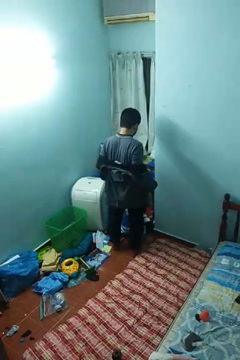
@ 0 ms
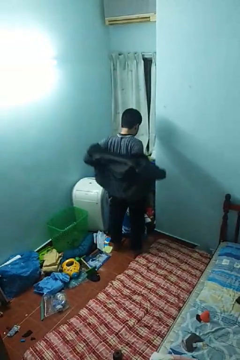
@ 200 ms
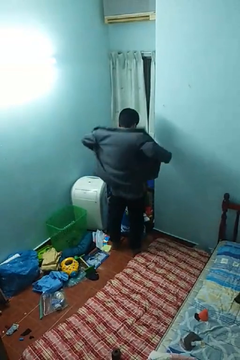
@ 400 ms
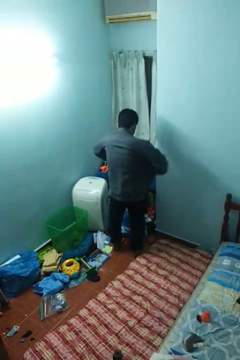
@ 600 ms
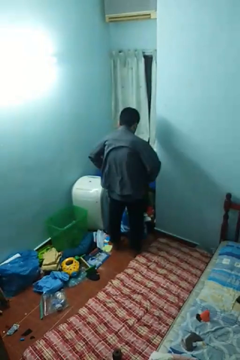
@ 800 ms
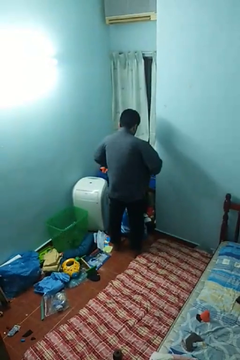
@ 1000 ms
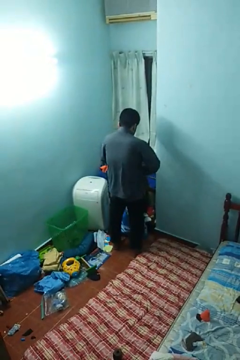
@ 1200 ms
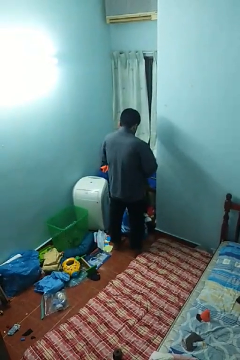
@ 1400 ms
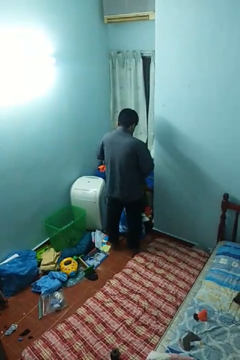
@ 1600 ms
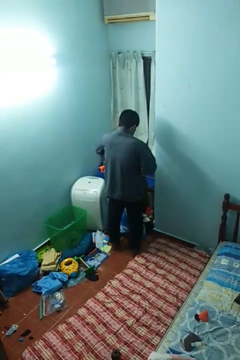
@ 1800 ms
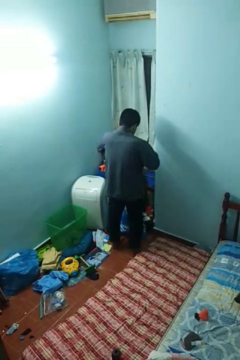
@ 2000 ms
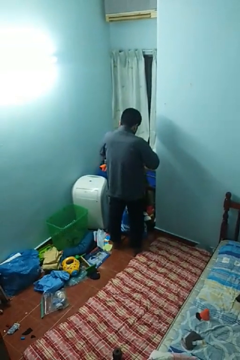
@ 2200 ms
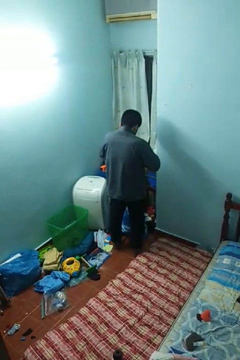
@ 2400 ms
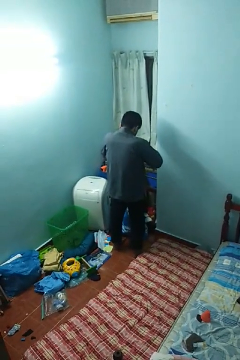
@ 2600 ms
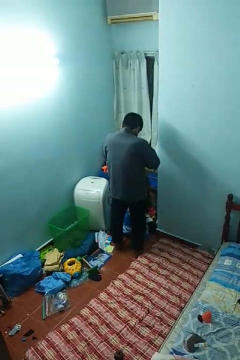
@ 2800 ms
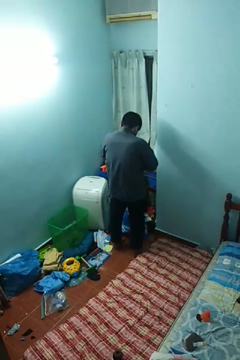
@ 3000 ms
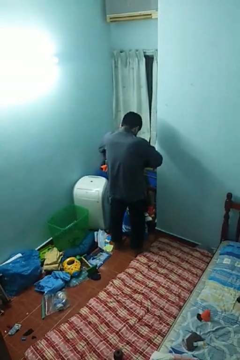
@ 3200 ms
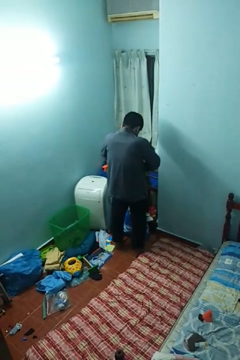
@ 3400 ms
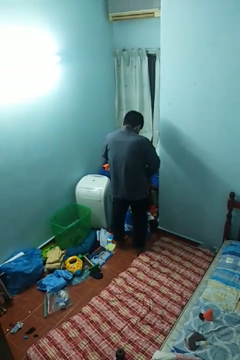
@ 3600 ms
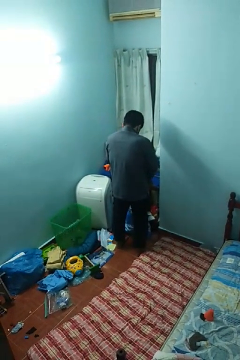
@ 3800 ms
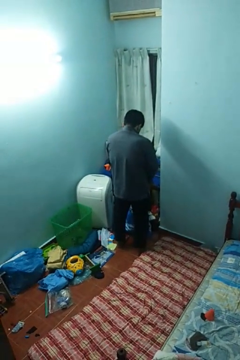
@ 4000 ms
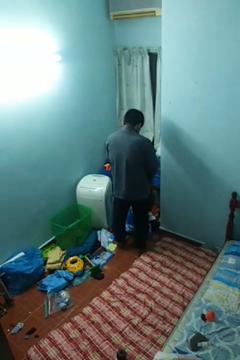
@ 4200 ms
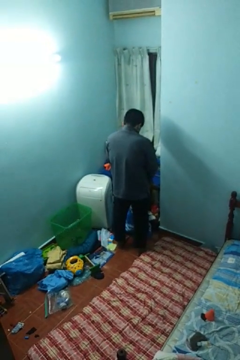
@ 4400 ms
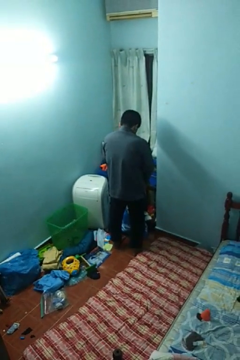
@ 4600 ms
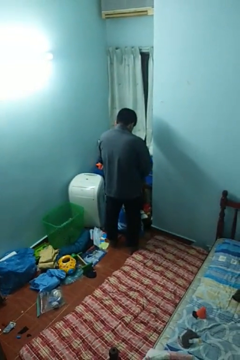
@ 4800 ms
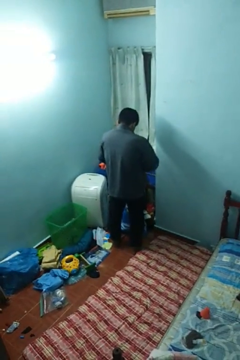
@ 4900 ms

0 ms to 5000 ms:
person buttons shirt

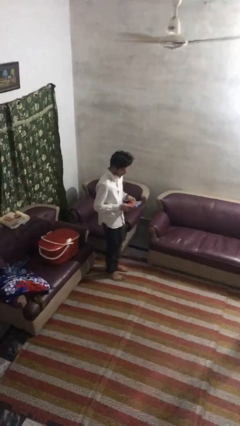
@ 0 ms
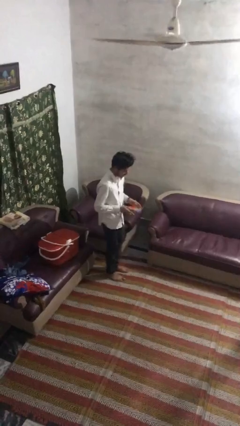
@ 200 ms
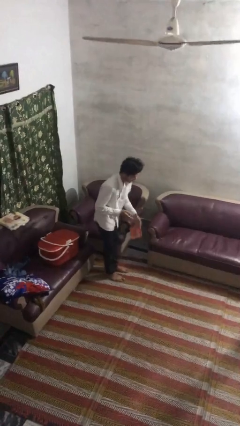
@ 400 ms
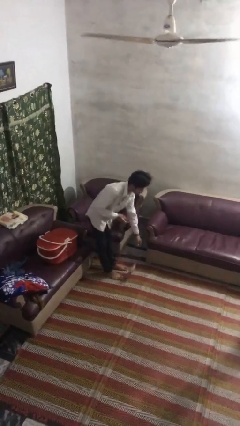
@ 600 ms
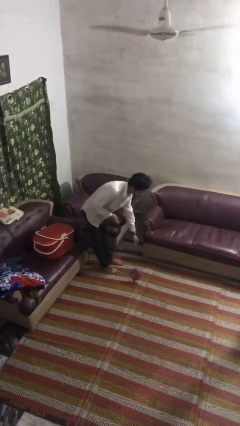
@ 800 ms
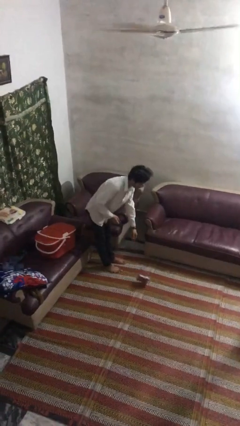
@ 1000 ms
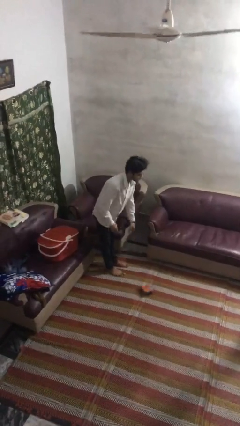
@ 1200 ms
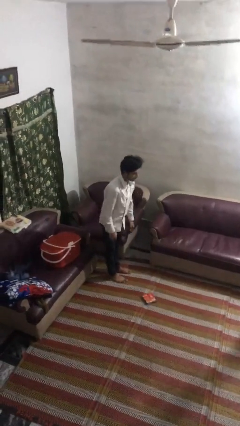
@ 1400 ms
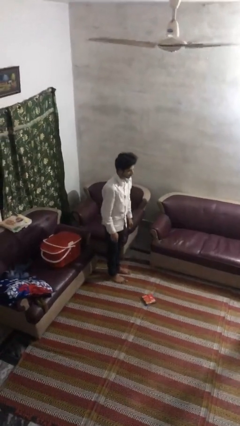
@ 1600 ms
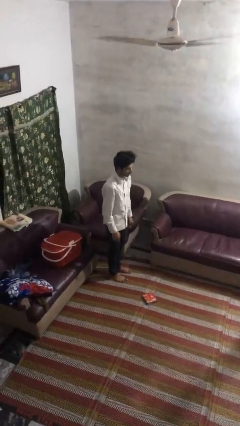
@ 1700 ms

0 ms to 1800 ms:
person drops object

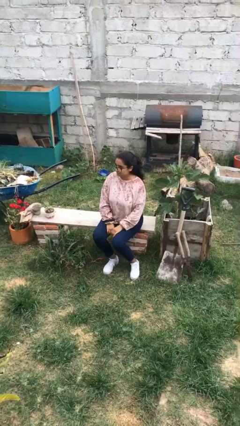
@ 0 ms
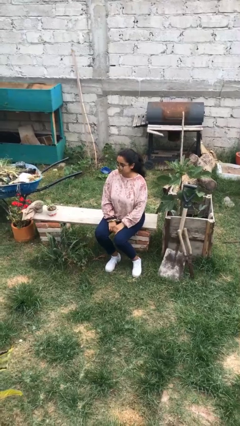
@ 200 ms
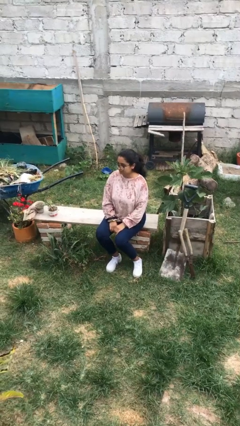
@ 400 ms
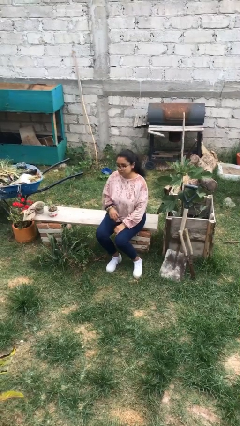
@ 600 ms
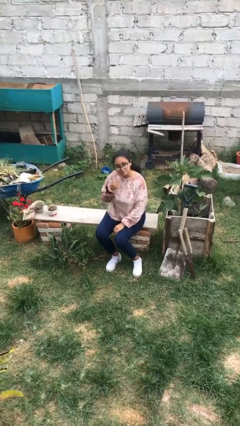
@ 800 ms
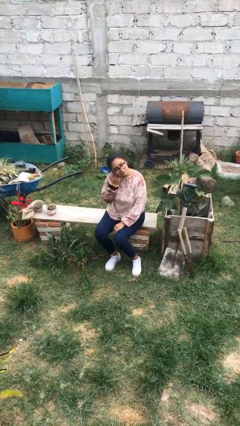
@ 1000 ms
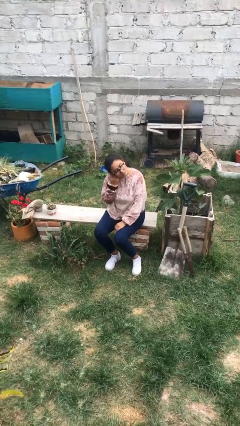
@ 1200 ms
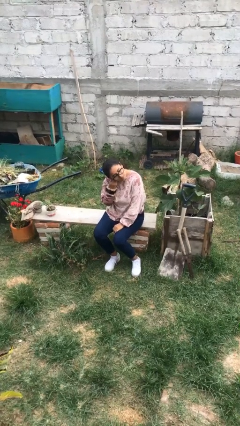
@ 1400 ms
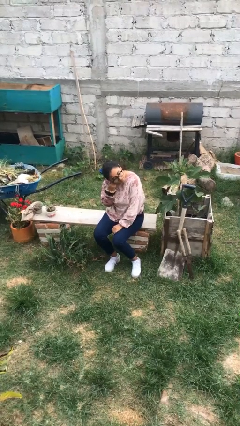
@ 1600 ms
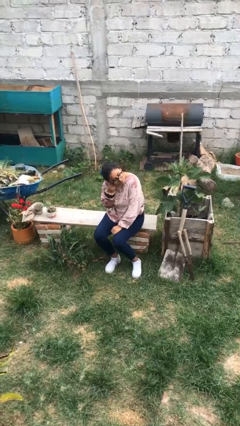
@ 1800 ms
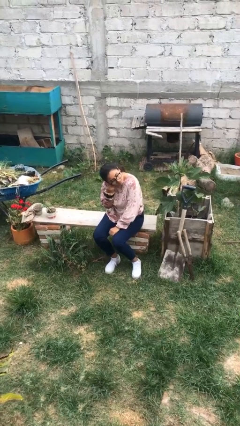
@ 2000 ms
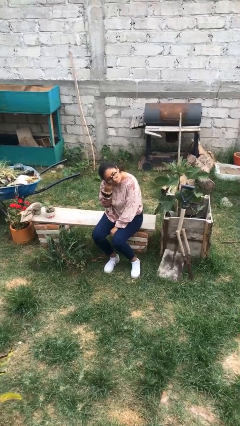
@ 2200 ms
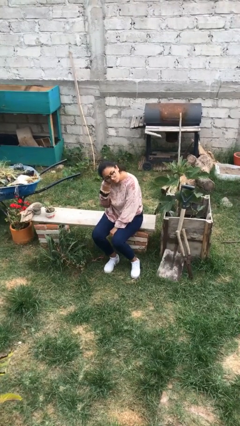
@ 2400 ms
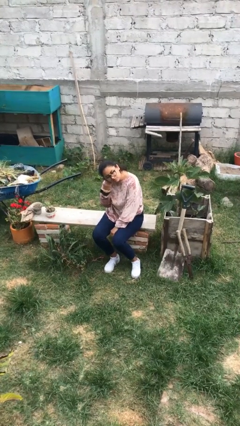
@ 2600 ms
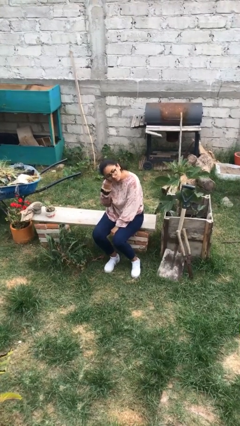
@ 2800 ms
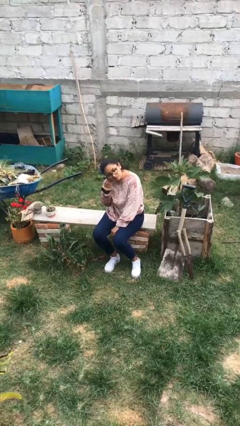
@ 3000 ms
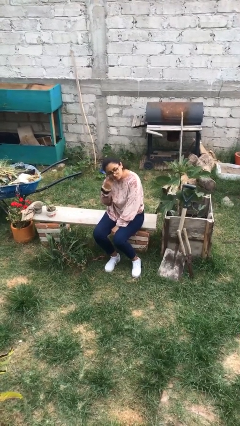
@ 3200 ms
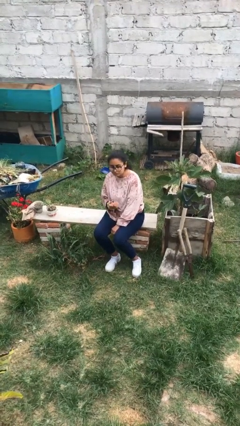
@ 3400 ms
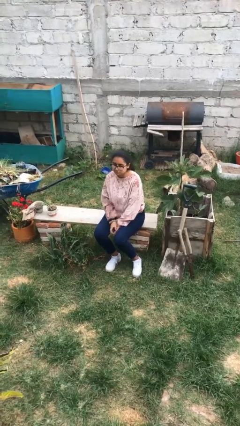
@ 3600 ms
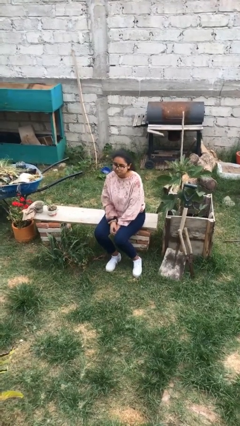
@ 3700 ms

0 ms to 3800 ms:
person touches earlobe

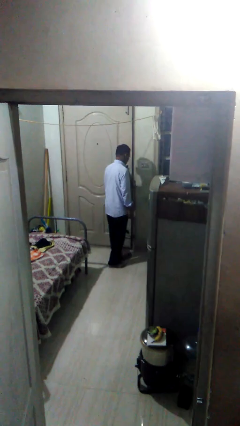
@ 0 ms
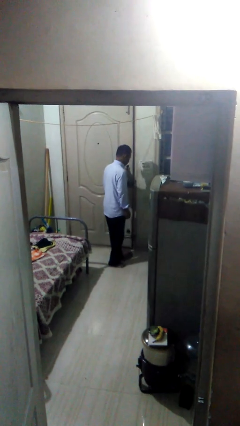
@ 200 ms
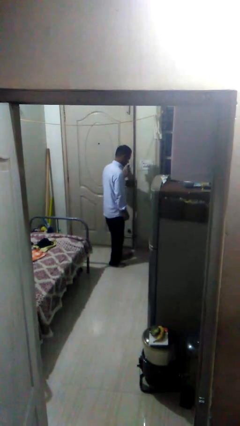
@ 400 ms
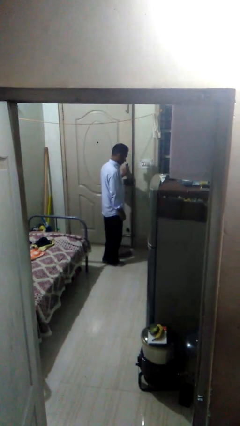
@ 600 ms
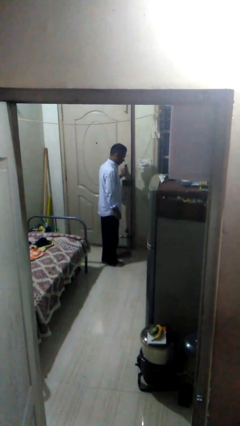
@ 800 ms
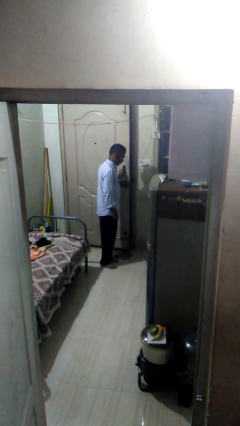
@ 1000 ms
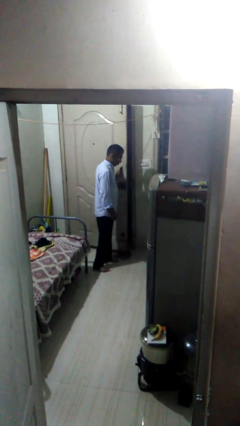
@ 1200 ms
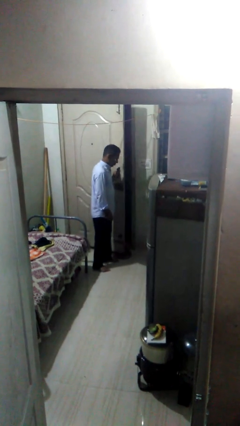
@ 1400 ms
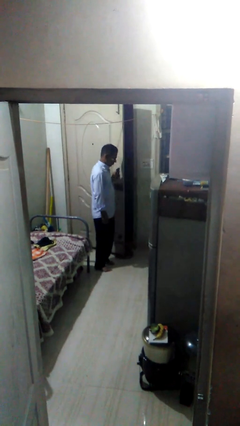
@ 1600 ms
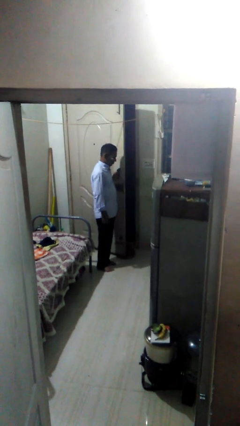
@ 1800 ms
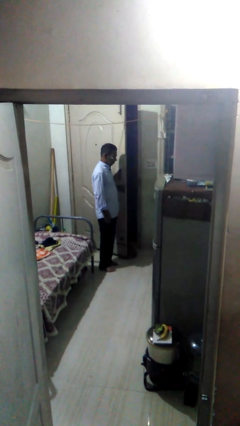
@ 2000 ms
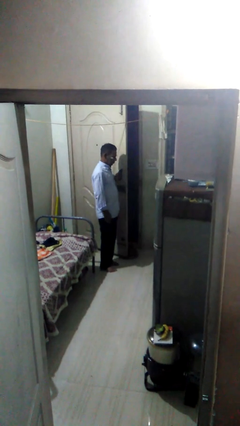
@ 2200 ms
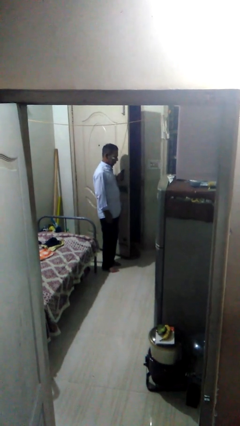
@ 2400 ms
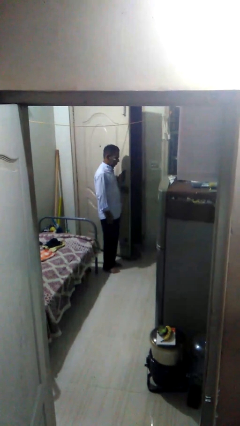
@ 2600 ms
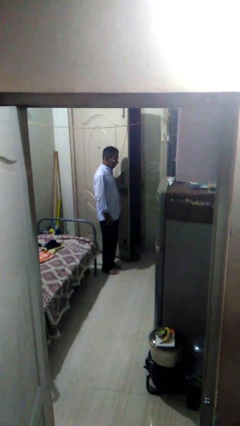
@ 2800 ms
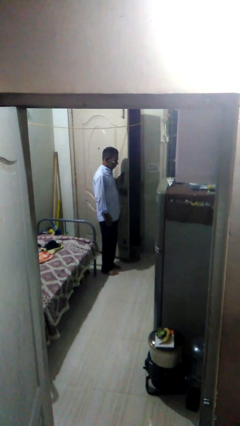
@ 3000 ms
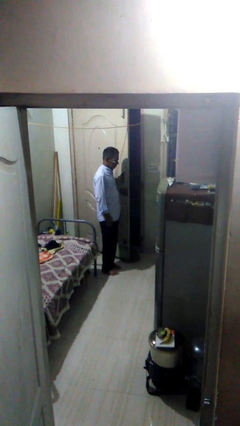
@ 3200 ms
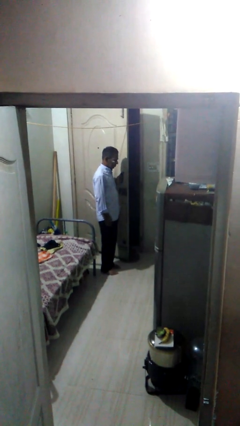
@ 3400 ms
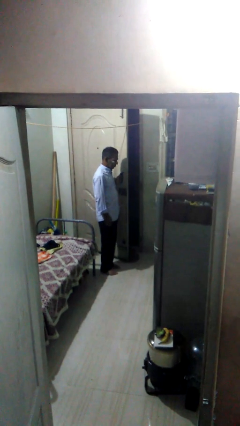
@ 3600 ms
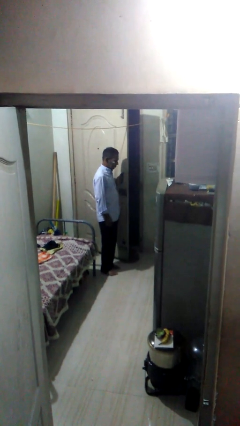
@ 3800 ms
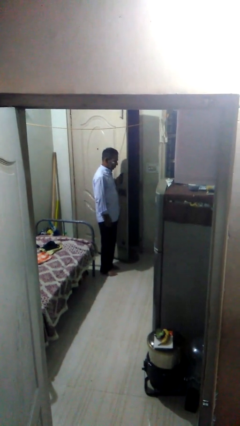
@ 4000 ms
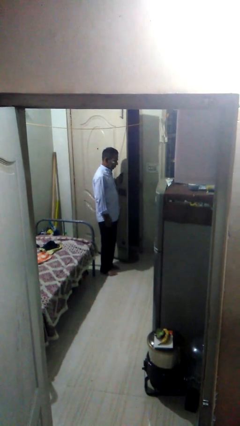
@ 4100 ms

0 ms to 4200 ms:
person opens facility door

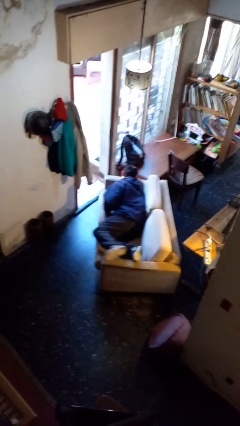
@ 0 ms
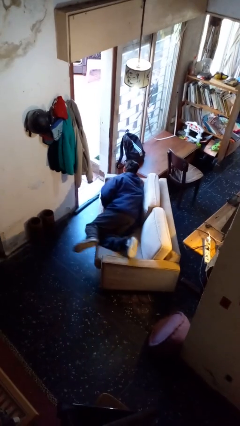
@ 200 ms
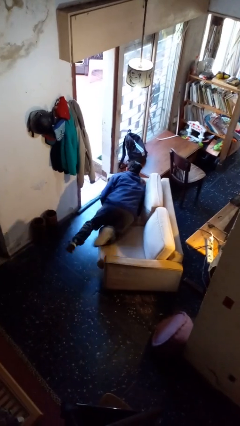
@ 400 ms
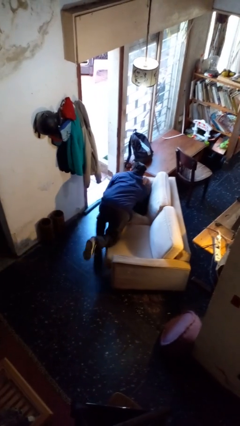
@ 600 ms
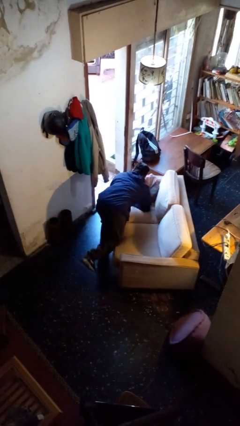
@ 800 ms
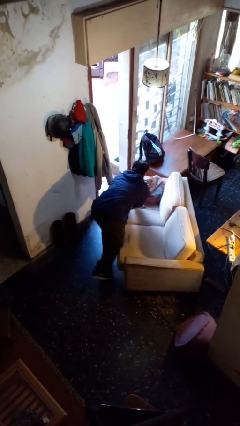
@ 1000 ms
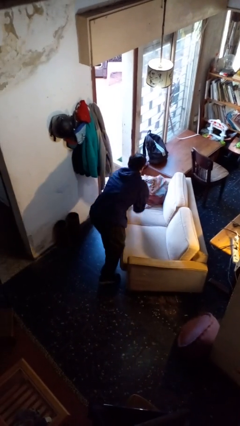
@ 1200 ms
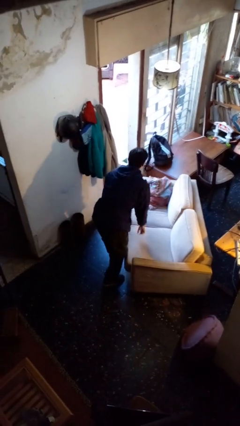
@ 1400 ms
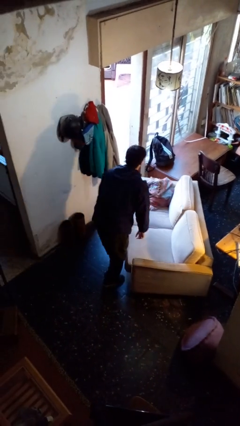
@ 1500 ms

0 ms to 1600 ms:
person stands up

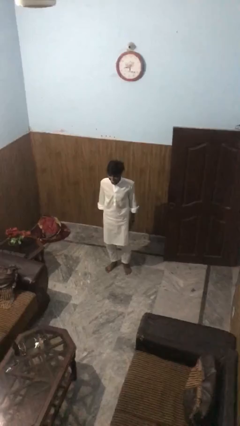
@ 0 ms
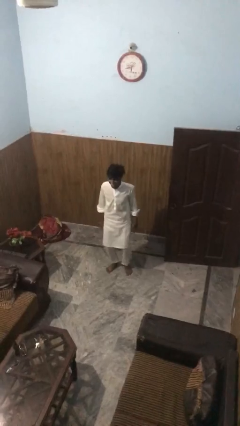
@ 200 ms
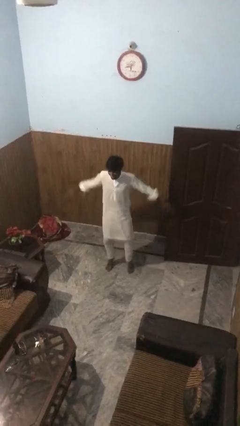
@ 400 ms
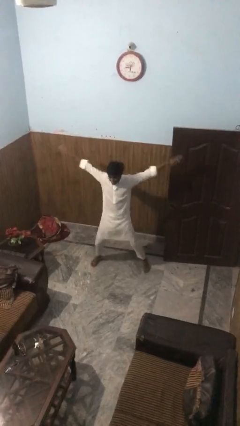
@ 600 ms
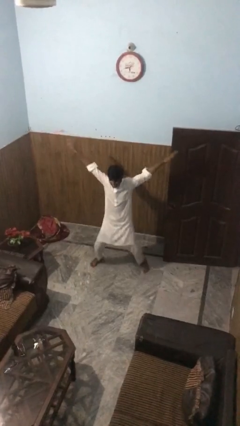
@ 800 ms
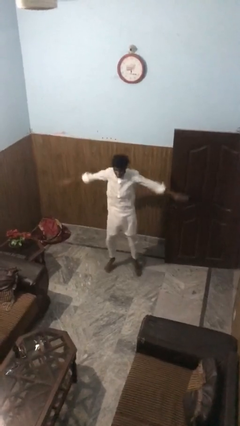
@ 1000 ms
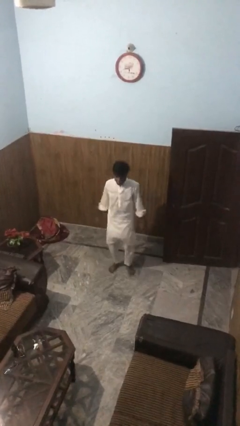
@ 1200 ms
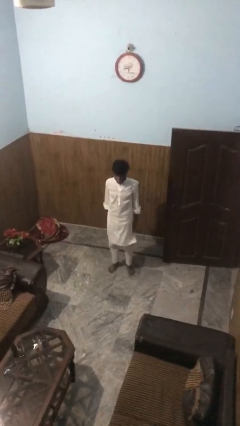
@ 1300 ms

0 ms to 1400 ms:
person exercises with jumping jacks

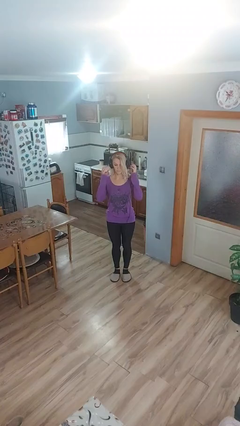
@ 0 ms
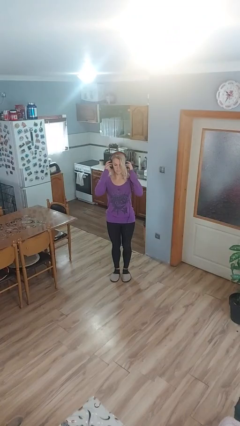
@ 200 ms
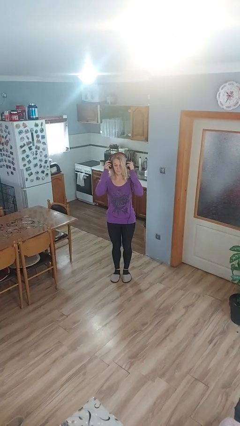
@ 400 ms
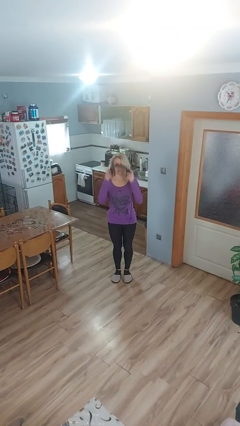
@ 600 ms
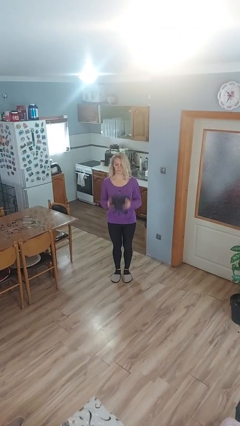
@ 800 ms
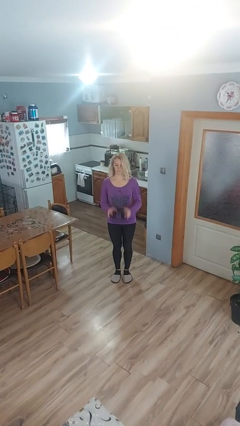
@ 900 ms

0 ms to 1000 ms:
person takes off headphones
